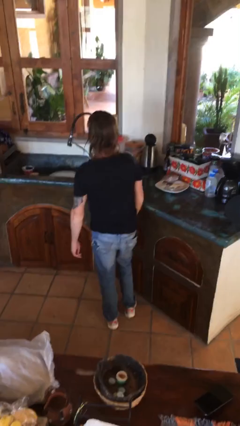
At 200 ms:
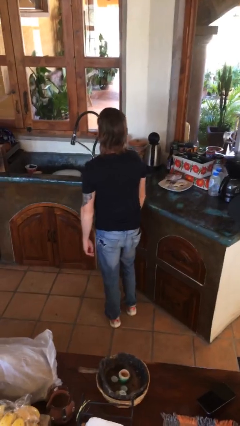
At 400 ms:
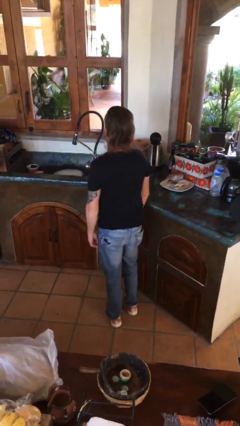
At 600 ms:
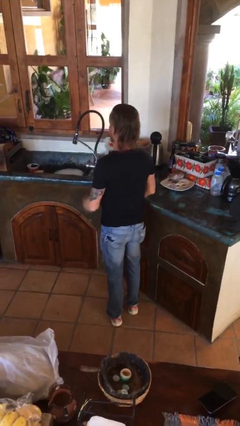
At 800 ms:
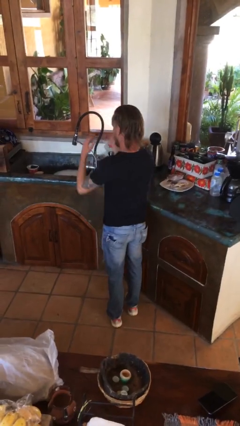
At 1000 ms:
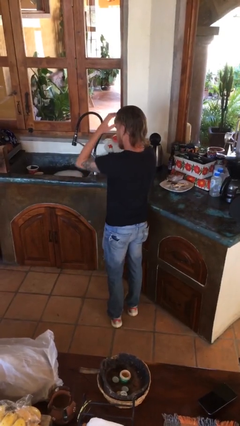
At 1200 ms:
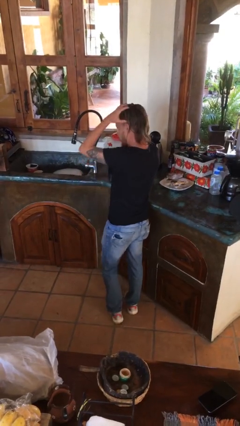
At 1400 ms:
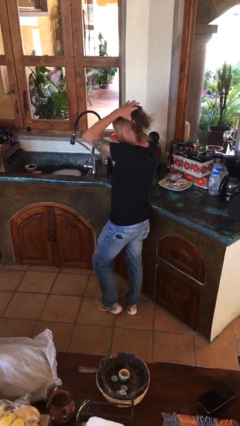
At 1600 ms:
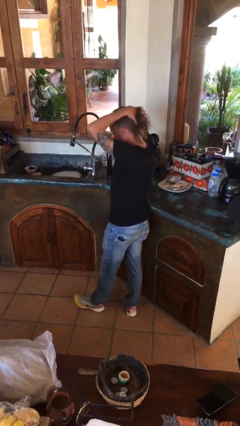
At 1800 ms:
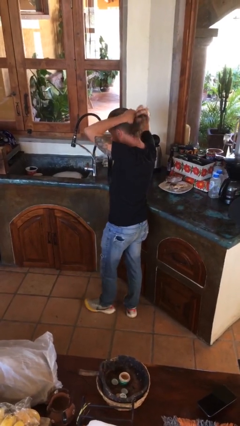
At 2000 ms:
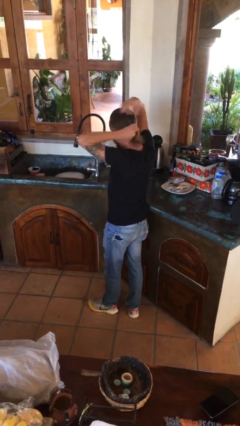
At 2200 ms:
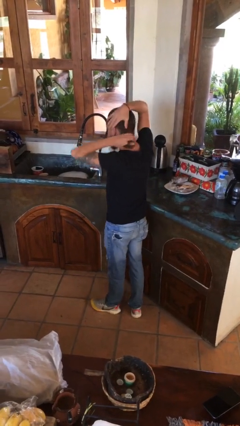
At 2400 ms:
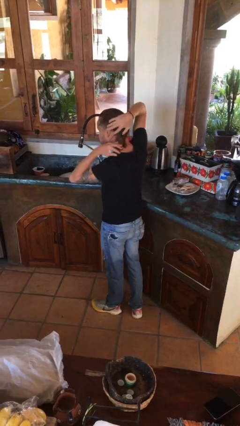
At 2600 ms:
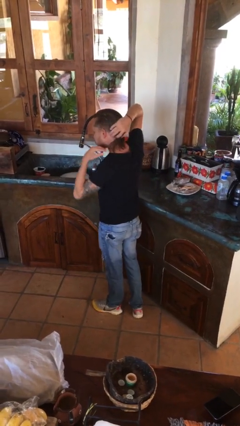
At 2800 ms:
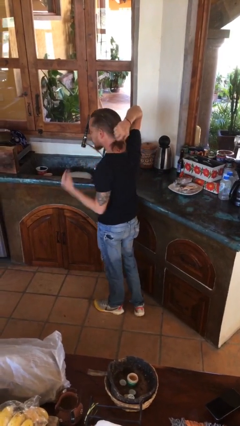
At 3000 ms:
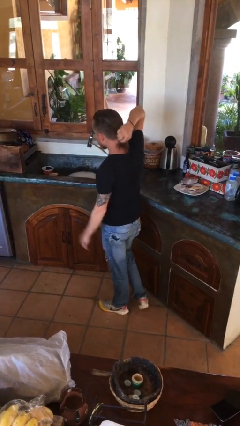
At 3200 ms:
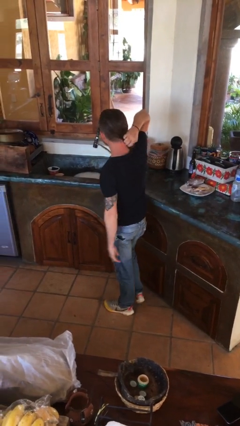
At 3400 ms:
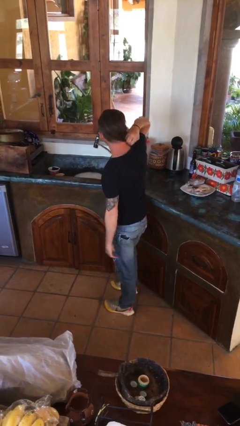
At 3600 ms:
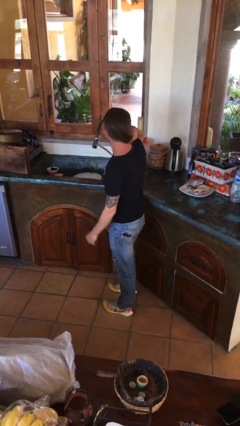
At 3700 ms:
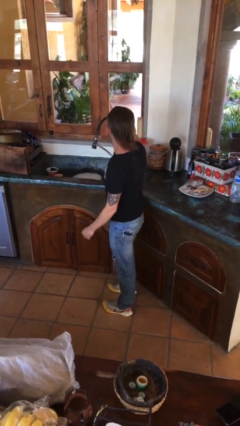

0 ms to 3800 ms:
person strokes hair

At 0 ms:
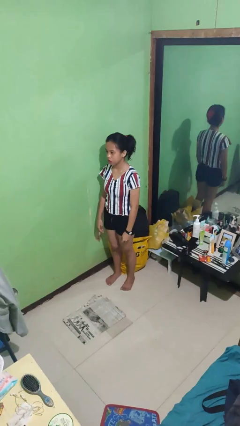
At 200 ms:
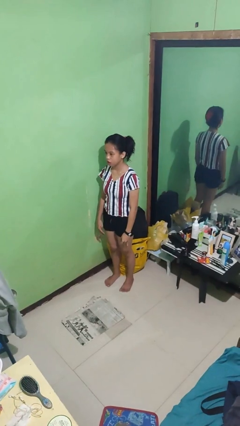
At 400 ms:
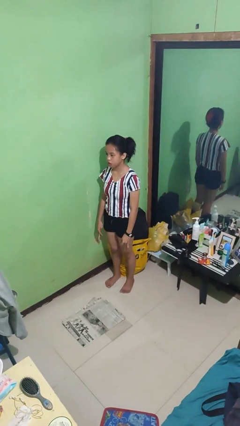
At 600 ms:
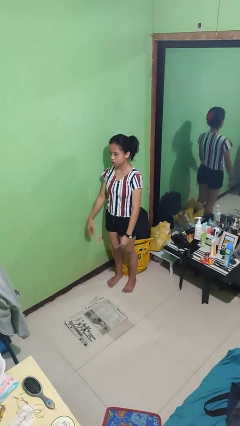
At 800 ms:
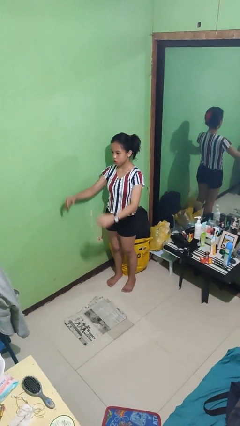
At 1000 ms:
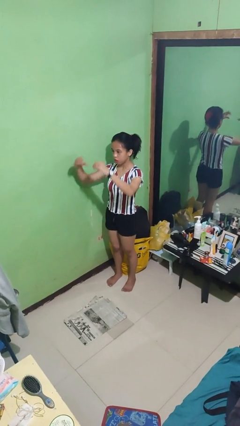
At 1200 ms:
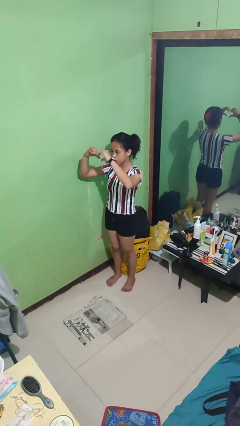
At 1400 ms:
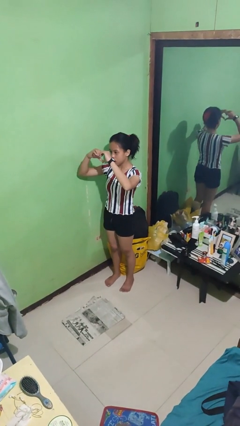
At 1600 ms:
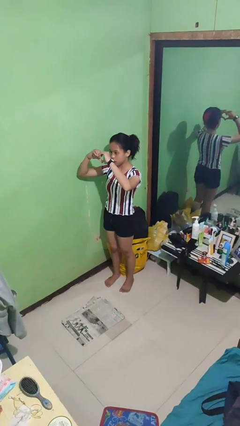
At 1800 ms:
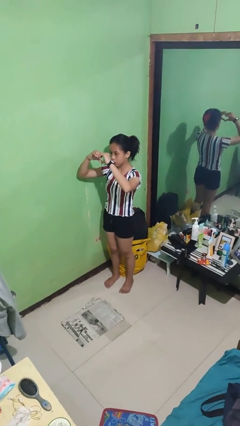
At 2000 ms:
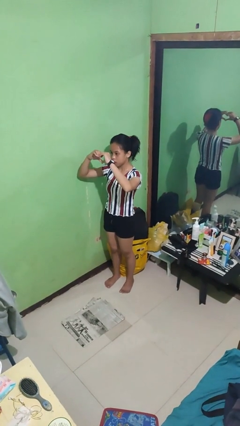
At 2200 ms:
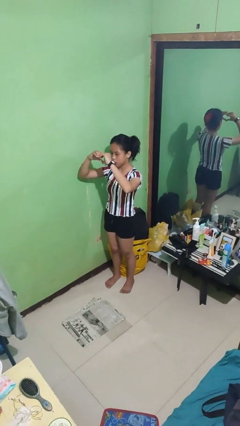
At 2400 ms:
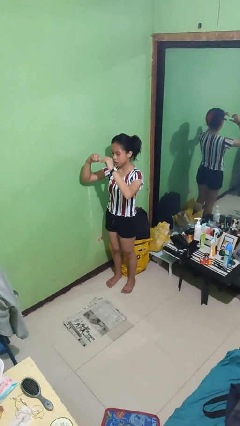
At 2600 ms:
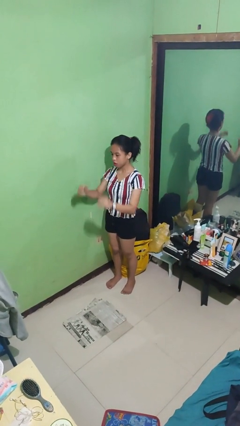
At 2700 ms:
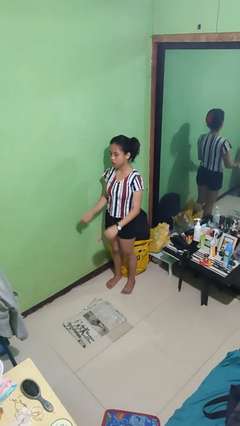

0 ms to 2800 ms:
person gestures heart

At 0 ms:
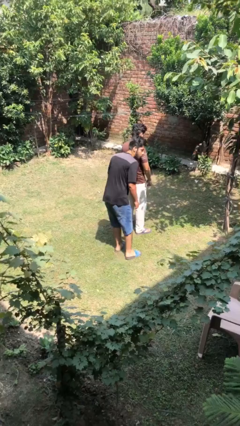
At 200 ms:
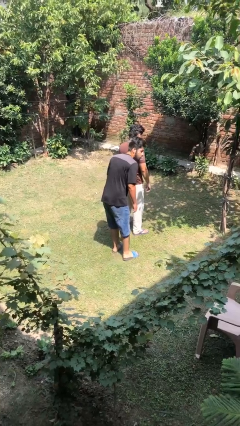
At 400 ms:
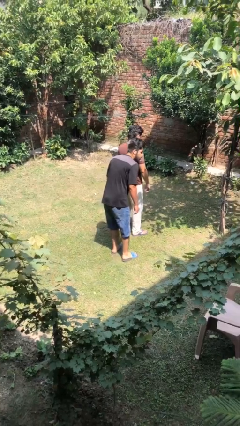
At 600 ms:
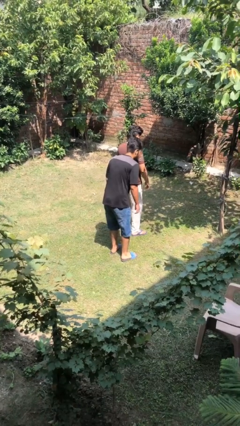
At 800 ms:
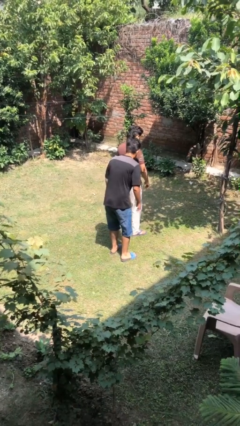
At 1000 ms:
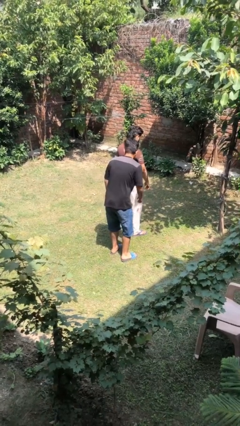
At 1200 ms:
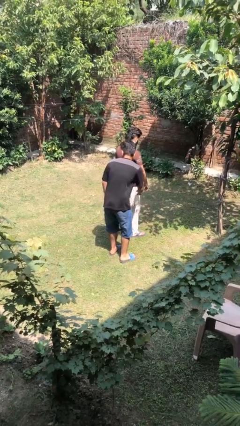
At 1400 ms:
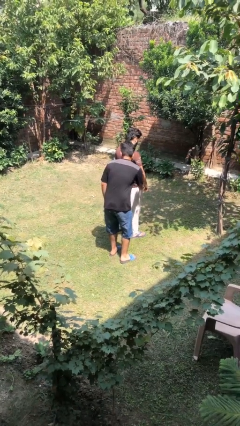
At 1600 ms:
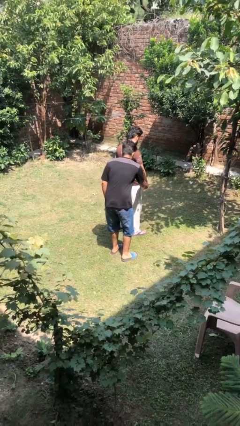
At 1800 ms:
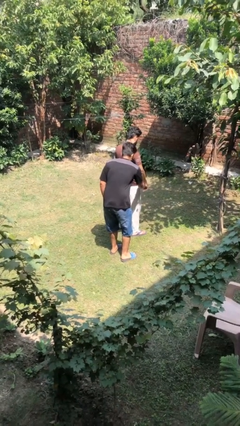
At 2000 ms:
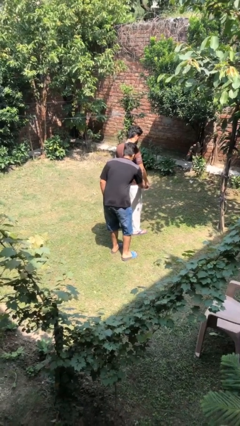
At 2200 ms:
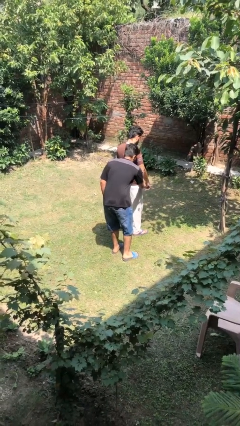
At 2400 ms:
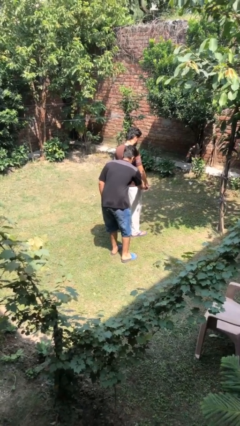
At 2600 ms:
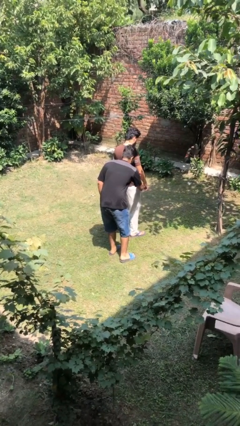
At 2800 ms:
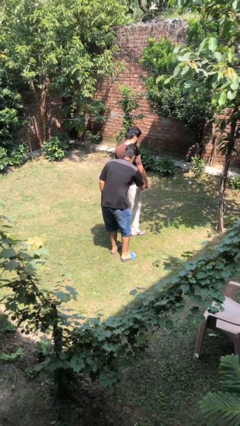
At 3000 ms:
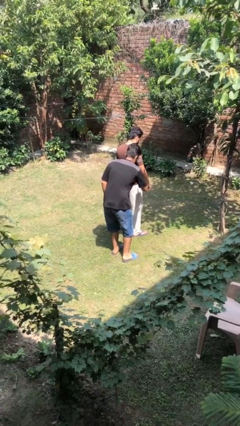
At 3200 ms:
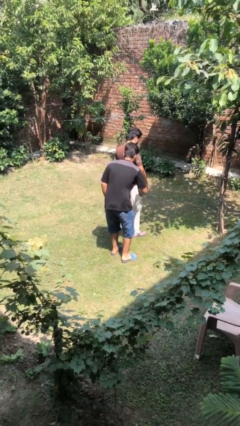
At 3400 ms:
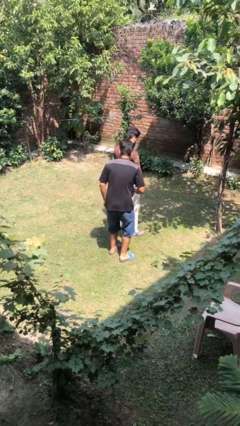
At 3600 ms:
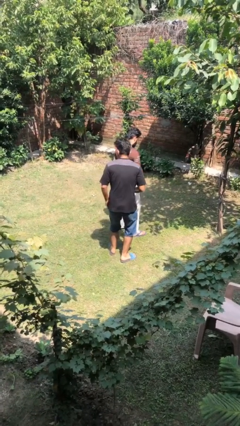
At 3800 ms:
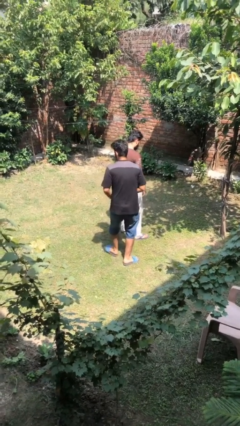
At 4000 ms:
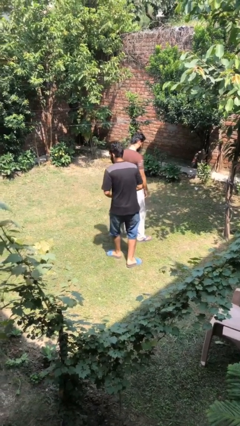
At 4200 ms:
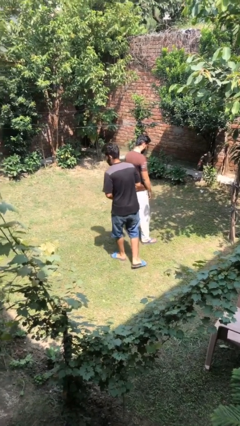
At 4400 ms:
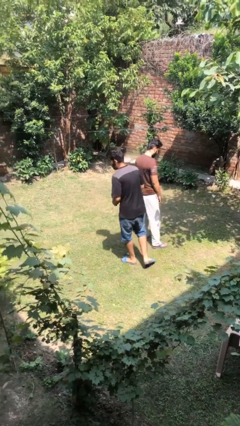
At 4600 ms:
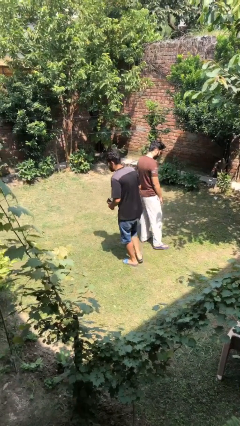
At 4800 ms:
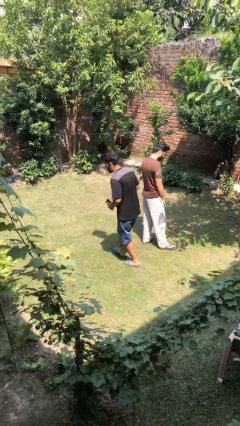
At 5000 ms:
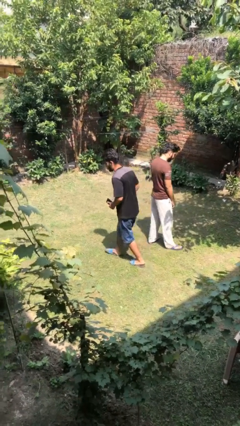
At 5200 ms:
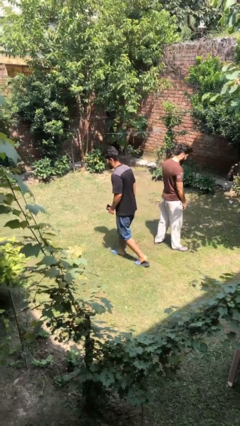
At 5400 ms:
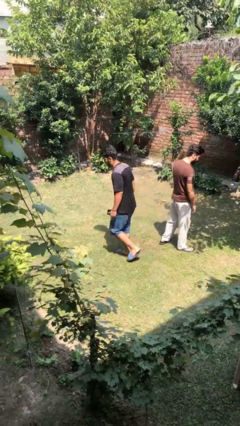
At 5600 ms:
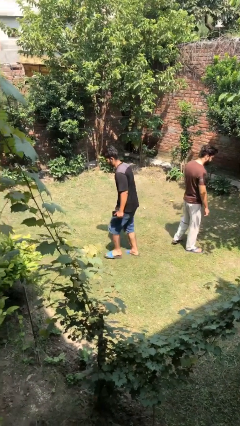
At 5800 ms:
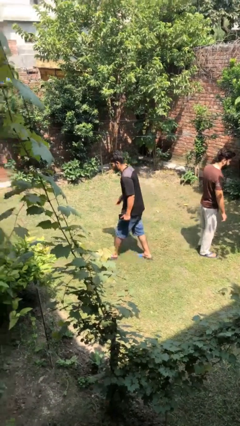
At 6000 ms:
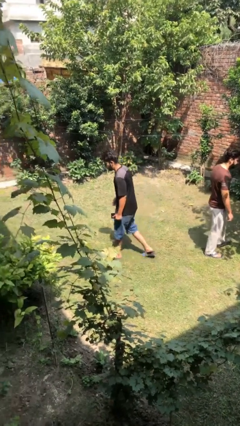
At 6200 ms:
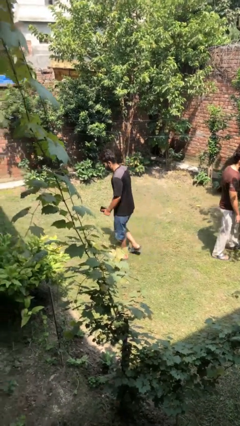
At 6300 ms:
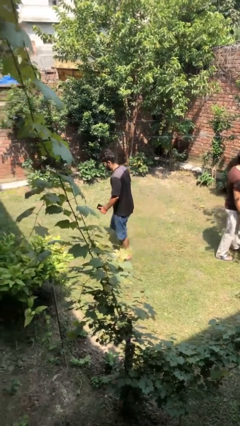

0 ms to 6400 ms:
person steals object from person

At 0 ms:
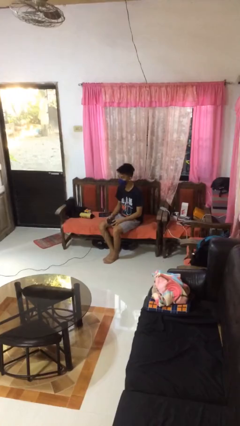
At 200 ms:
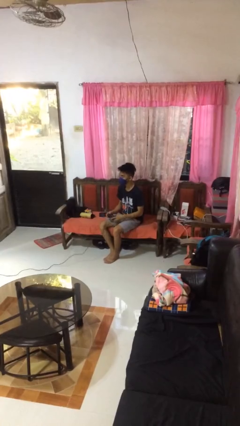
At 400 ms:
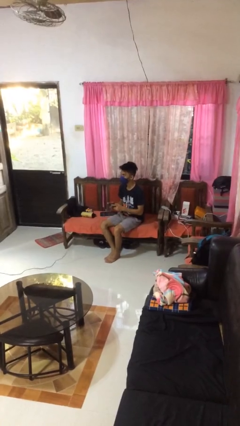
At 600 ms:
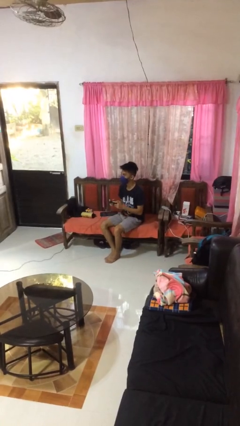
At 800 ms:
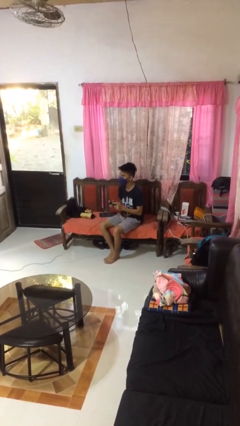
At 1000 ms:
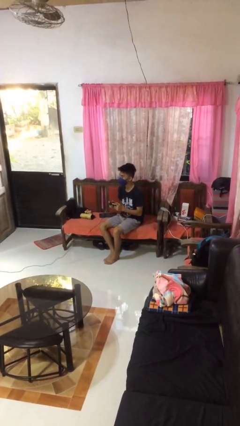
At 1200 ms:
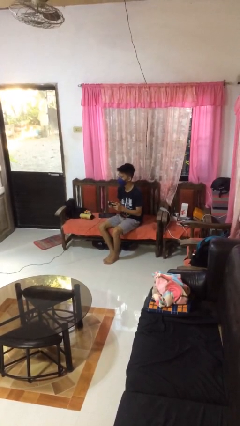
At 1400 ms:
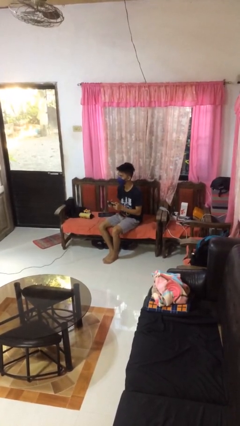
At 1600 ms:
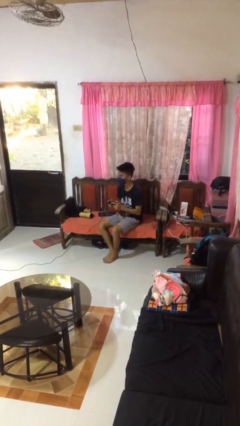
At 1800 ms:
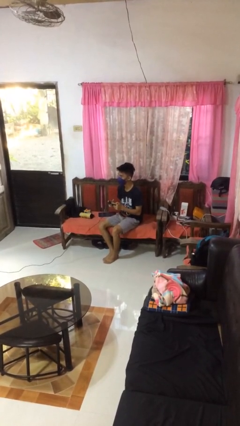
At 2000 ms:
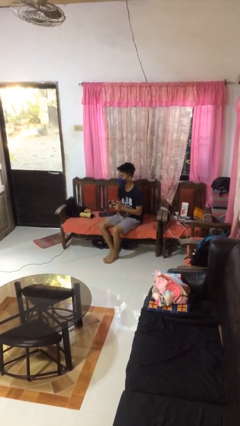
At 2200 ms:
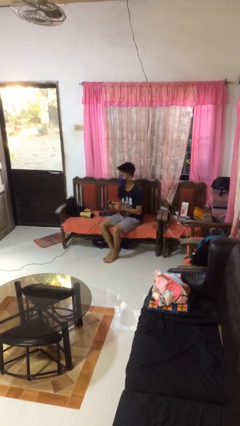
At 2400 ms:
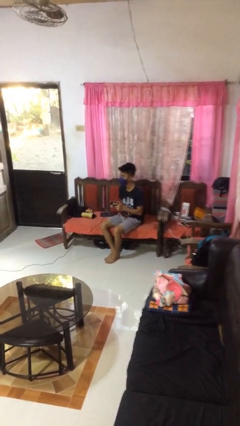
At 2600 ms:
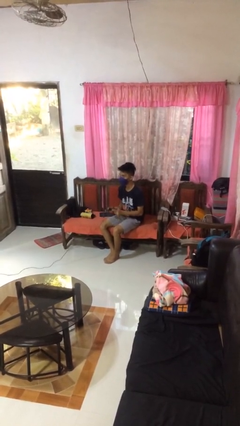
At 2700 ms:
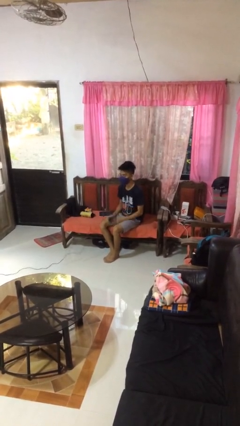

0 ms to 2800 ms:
person interacts with handheld game

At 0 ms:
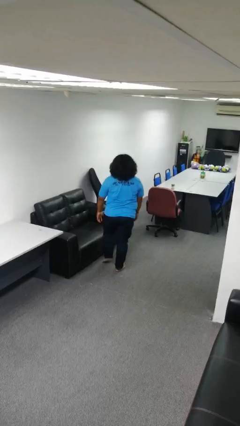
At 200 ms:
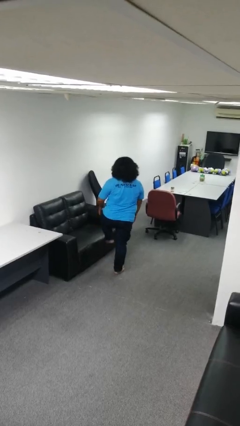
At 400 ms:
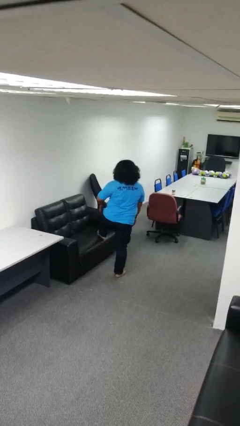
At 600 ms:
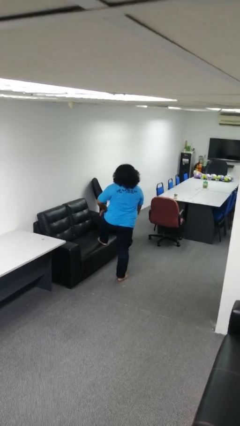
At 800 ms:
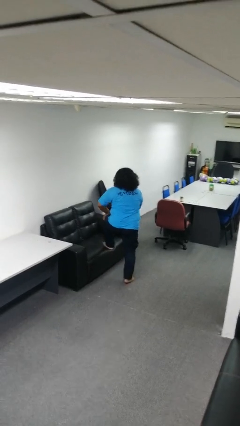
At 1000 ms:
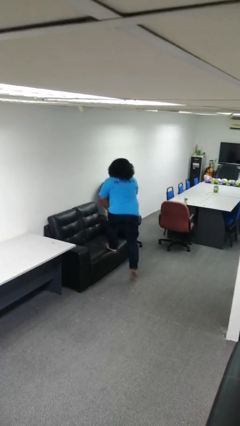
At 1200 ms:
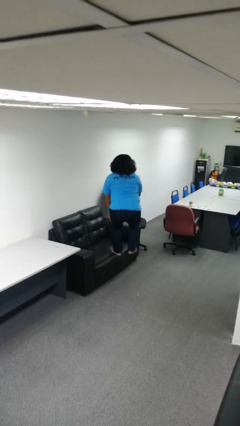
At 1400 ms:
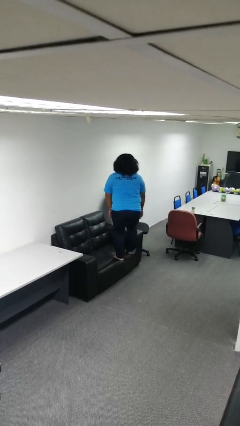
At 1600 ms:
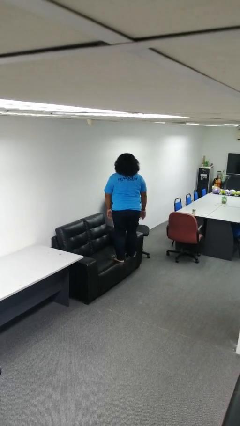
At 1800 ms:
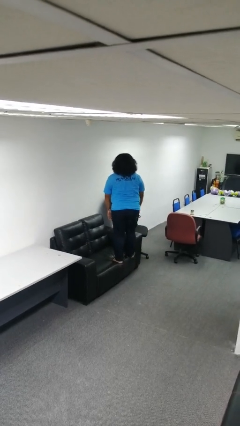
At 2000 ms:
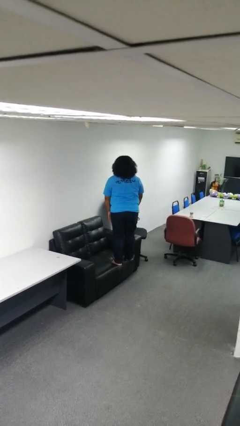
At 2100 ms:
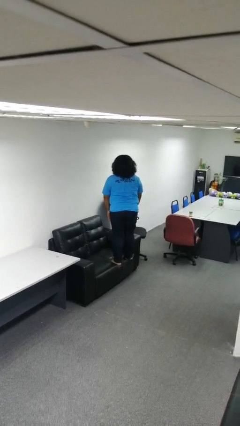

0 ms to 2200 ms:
person climbs on couch
